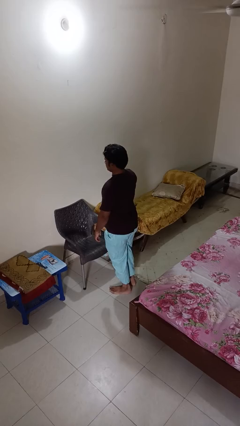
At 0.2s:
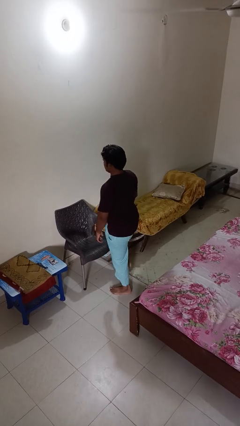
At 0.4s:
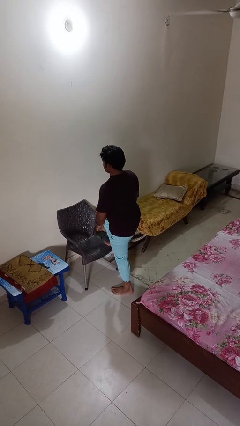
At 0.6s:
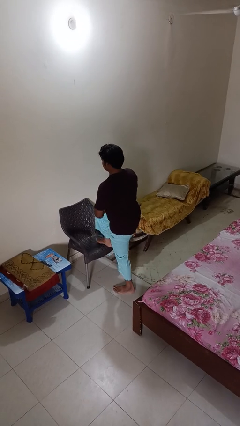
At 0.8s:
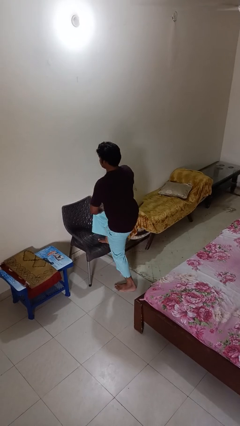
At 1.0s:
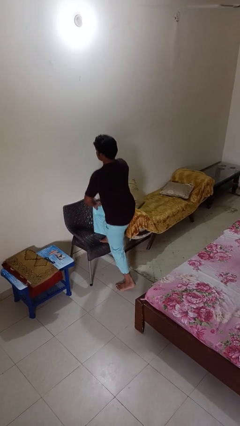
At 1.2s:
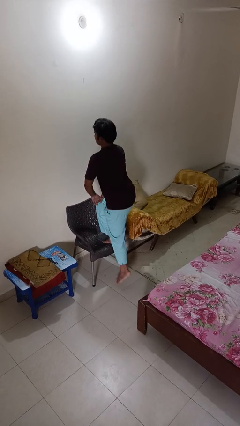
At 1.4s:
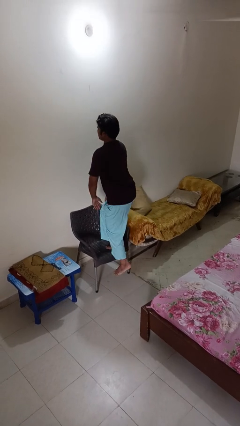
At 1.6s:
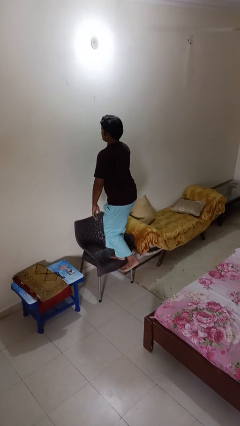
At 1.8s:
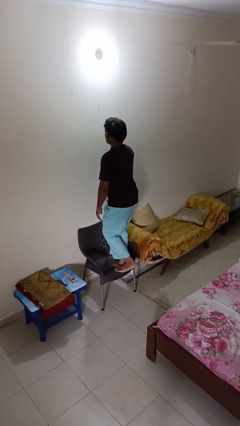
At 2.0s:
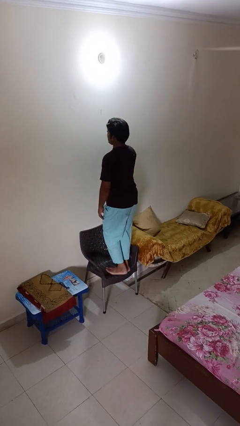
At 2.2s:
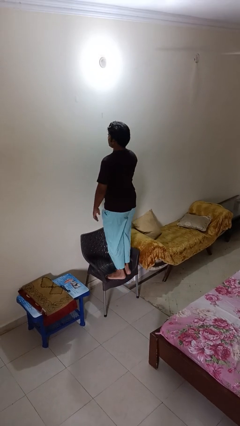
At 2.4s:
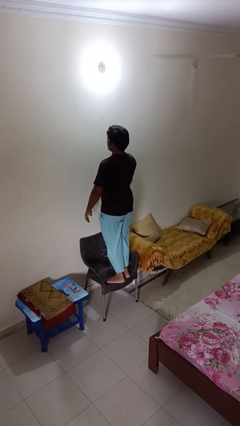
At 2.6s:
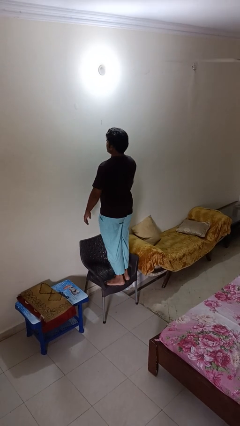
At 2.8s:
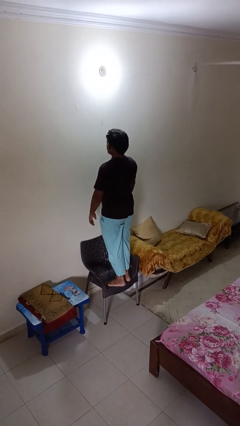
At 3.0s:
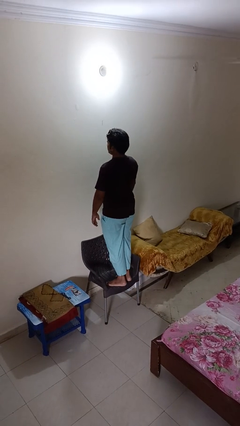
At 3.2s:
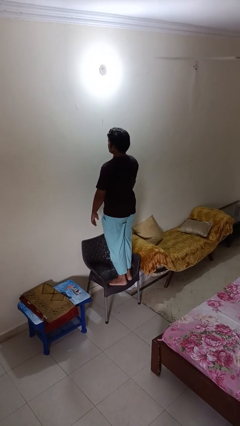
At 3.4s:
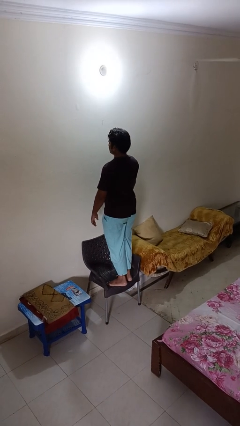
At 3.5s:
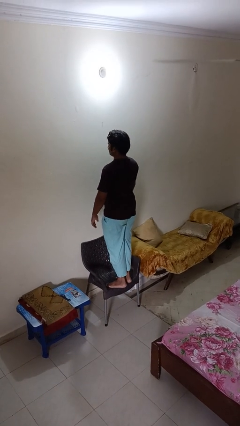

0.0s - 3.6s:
person climbs on chair

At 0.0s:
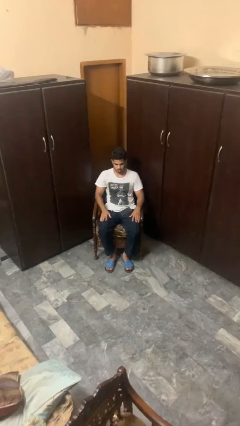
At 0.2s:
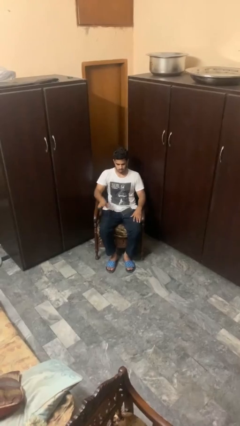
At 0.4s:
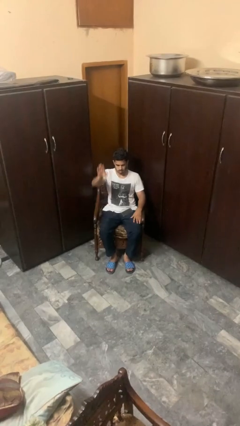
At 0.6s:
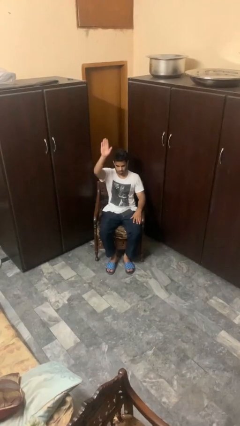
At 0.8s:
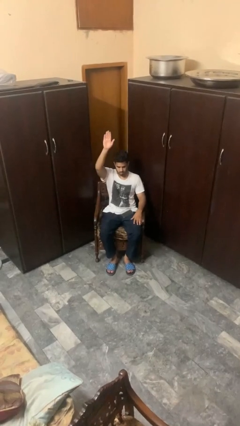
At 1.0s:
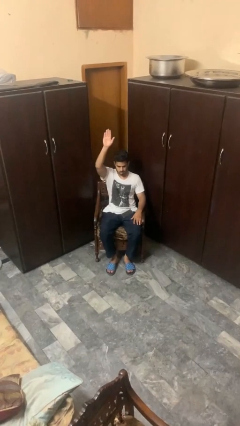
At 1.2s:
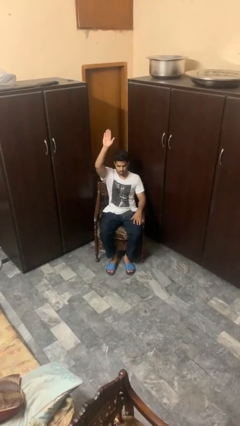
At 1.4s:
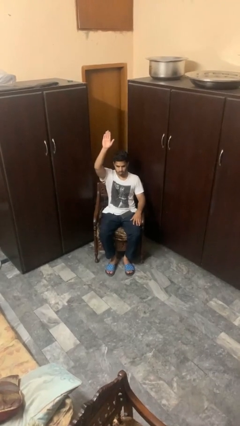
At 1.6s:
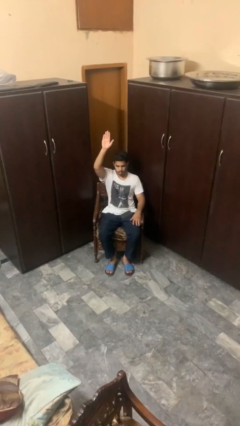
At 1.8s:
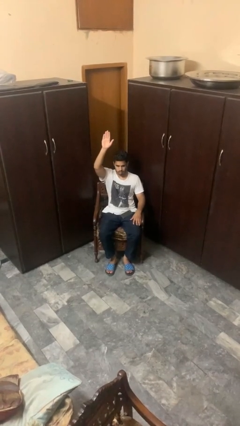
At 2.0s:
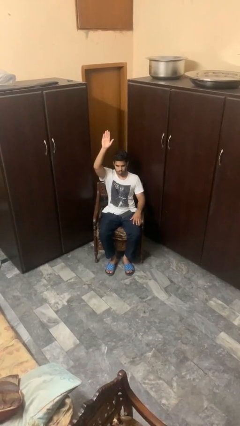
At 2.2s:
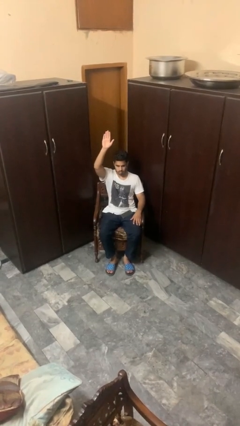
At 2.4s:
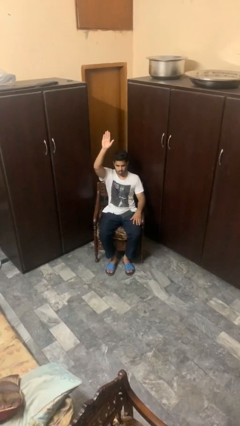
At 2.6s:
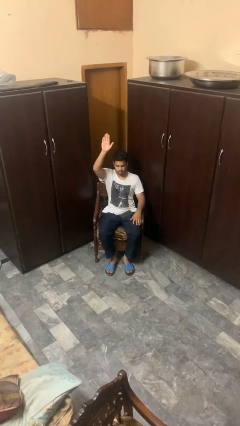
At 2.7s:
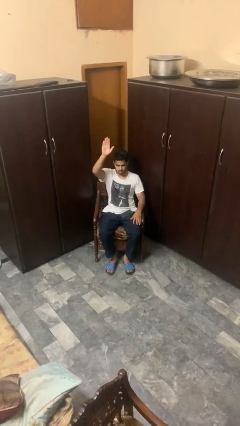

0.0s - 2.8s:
person gestures raise hand

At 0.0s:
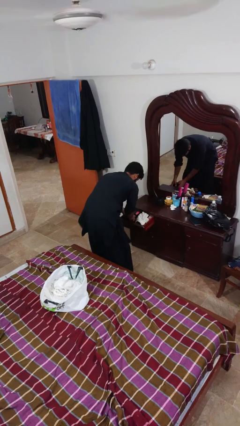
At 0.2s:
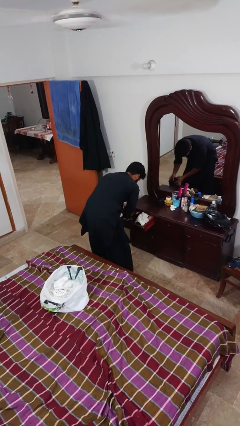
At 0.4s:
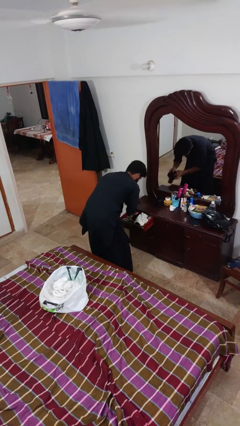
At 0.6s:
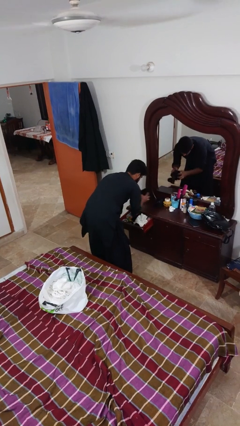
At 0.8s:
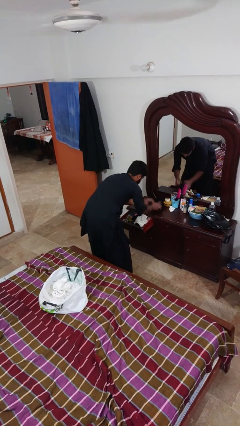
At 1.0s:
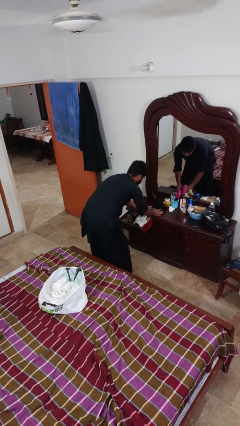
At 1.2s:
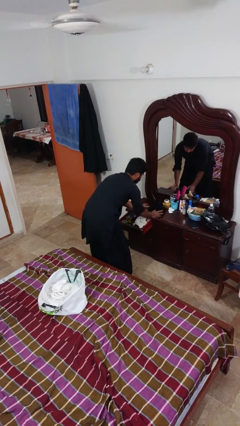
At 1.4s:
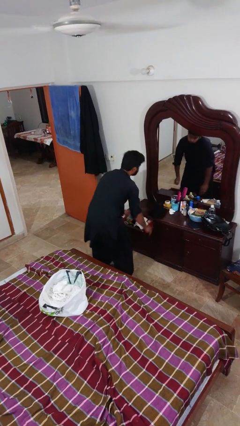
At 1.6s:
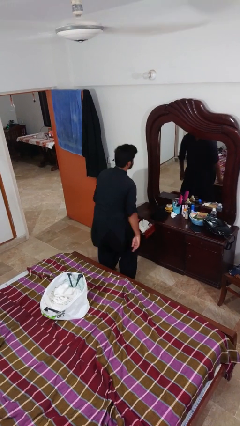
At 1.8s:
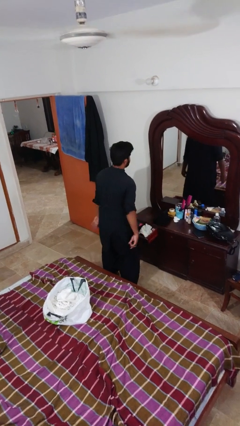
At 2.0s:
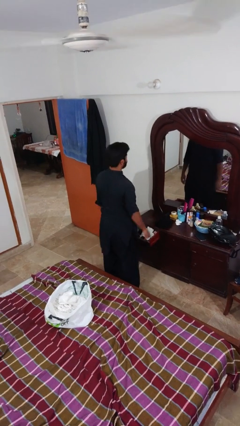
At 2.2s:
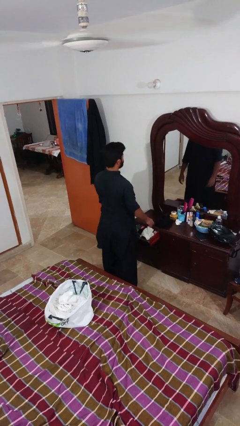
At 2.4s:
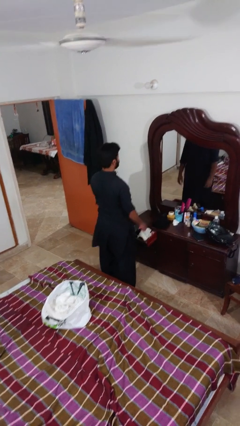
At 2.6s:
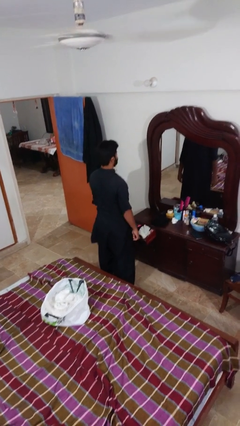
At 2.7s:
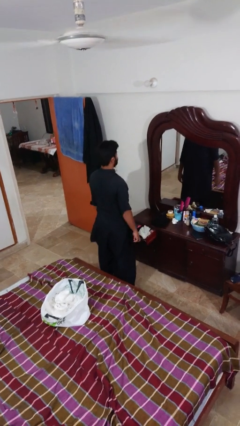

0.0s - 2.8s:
person takes clothes from dresser

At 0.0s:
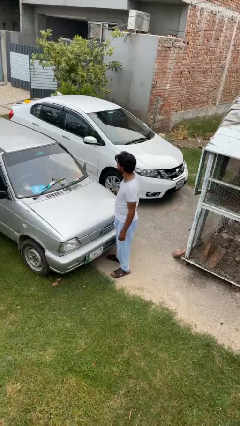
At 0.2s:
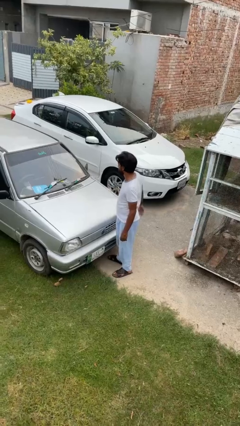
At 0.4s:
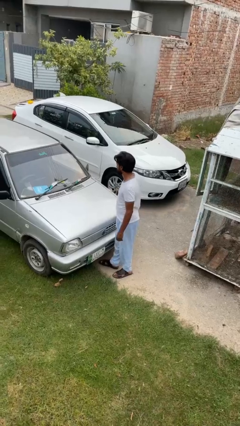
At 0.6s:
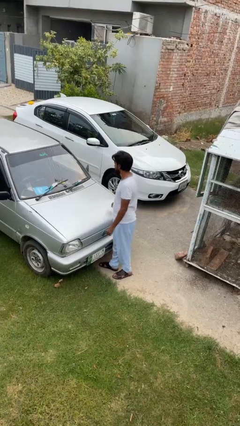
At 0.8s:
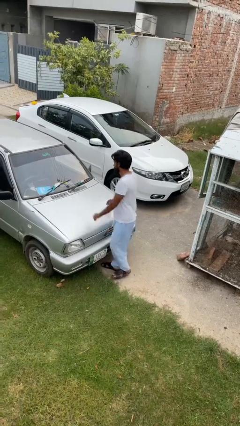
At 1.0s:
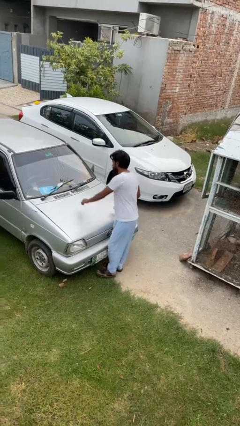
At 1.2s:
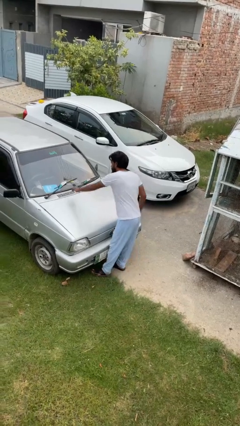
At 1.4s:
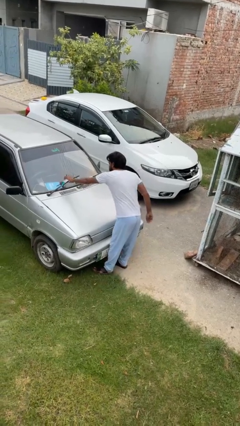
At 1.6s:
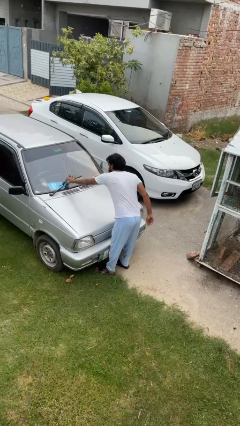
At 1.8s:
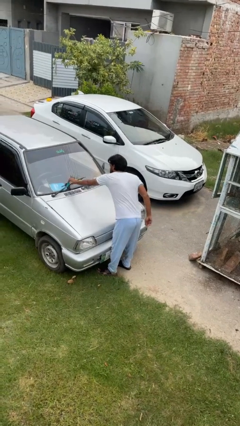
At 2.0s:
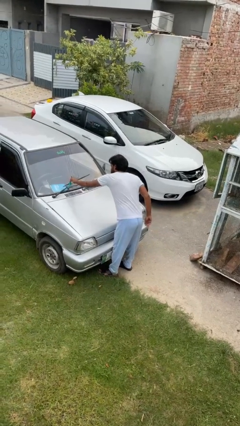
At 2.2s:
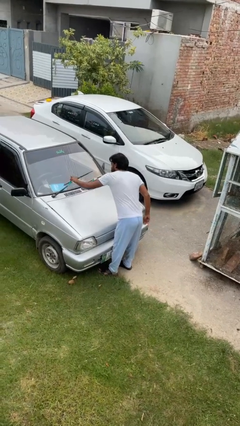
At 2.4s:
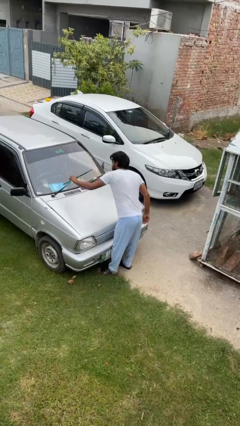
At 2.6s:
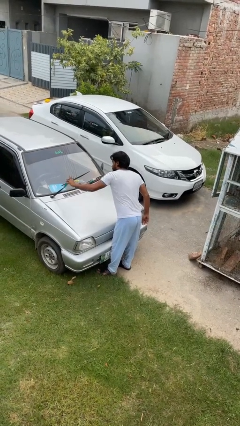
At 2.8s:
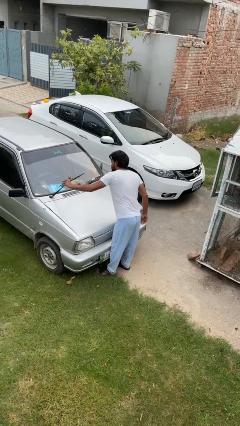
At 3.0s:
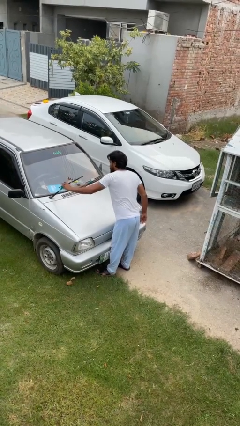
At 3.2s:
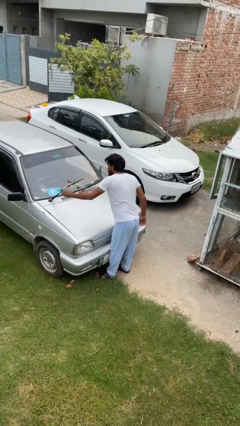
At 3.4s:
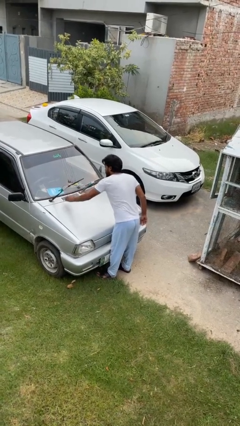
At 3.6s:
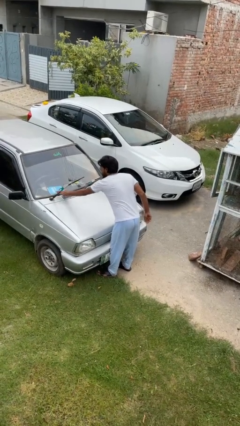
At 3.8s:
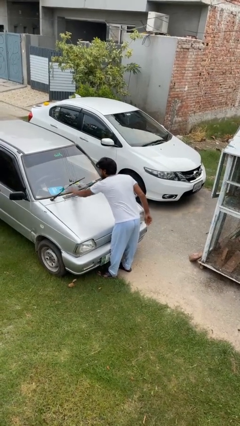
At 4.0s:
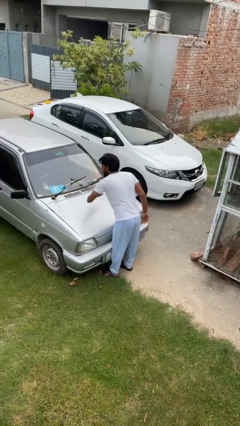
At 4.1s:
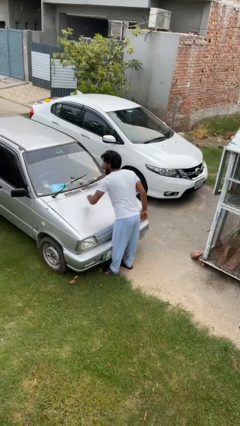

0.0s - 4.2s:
person flips up car wipers

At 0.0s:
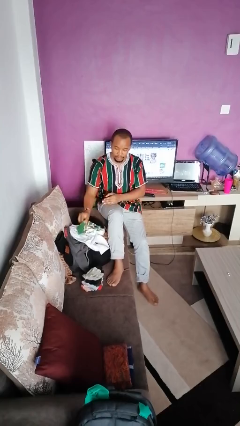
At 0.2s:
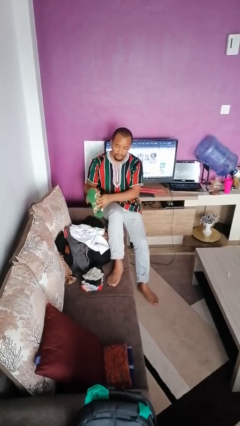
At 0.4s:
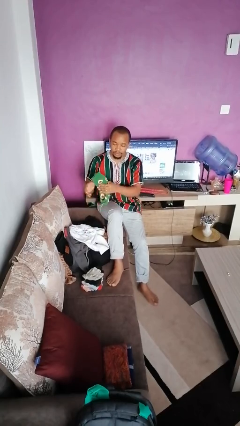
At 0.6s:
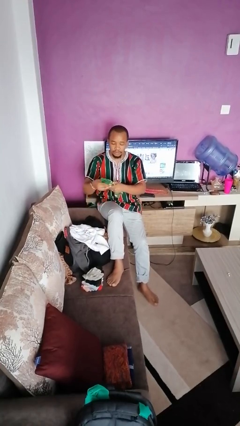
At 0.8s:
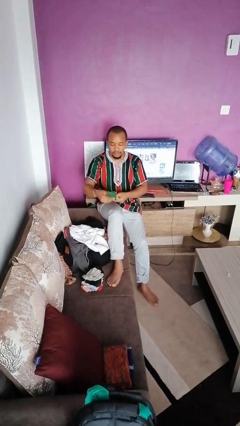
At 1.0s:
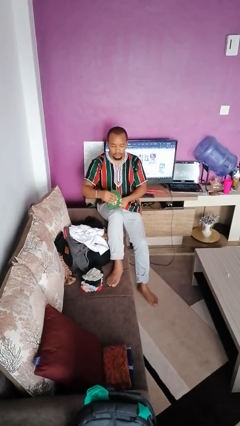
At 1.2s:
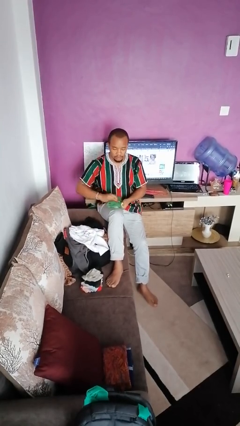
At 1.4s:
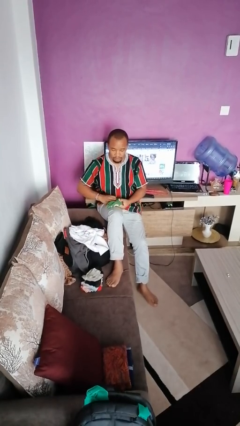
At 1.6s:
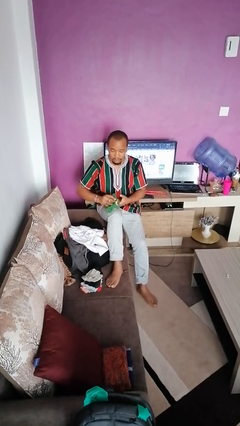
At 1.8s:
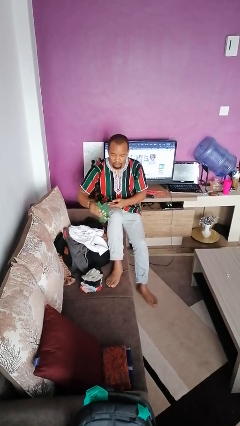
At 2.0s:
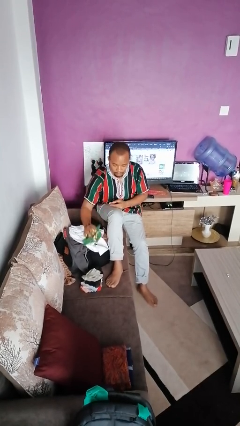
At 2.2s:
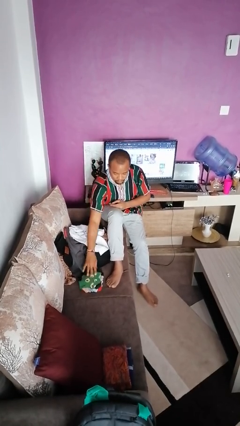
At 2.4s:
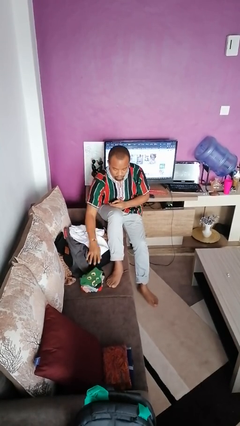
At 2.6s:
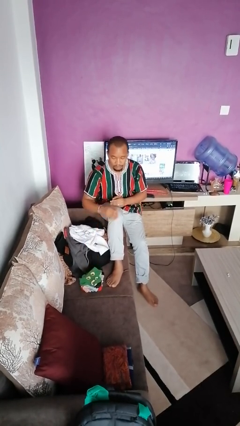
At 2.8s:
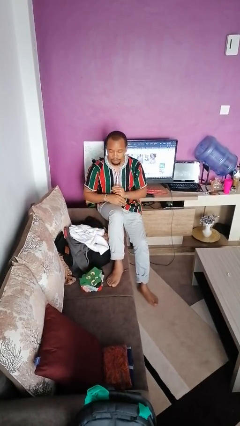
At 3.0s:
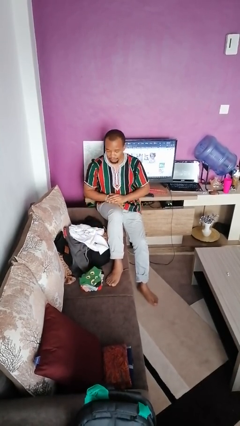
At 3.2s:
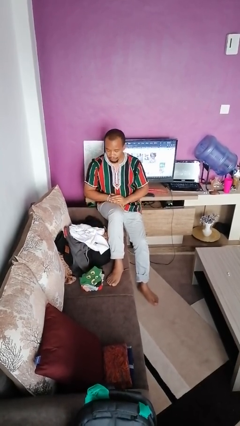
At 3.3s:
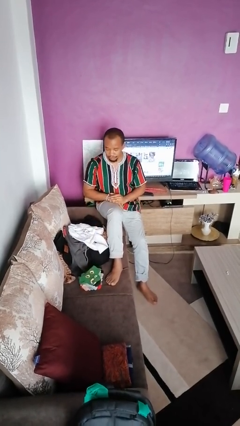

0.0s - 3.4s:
person folds socks

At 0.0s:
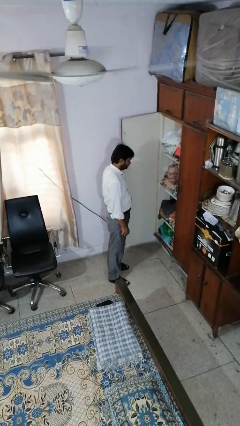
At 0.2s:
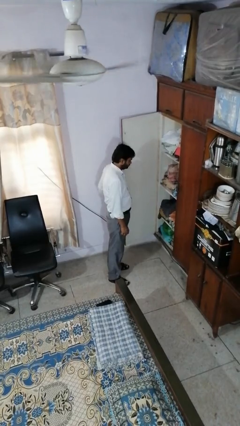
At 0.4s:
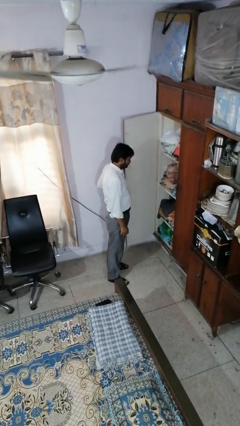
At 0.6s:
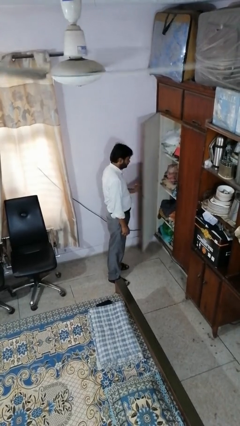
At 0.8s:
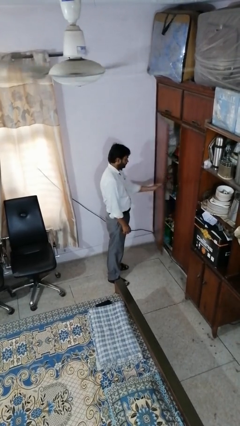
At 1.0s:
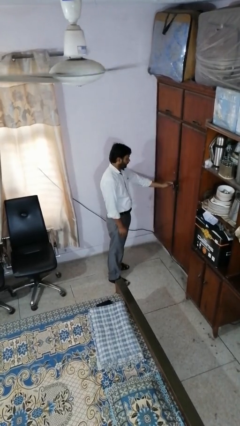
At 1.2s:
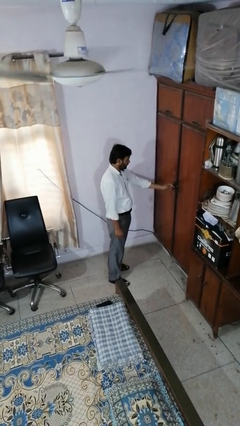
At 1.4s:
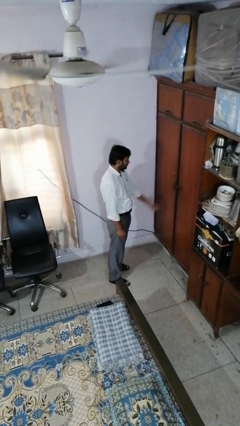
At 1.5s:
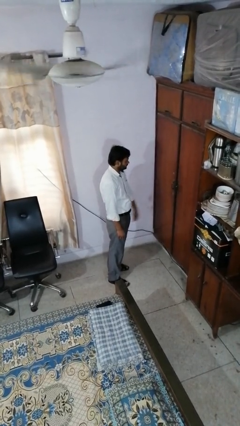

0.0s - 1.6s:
person closes closet door
